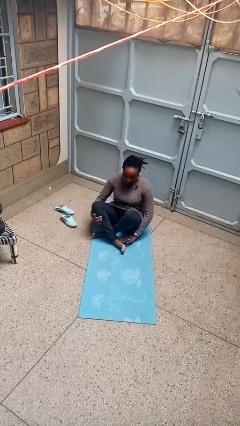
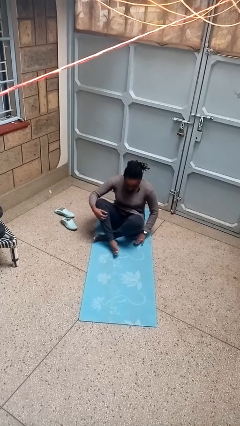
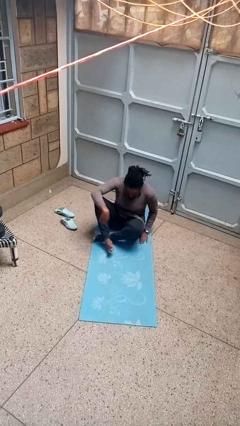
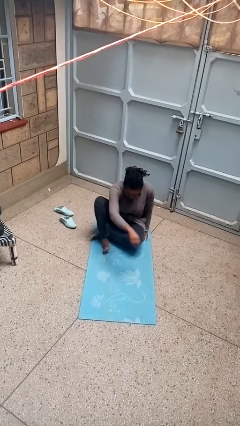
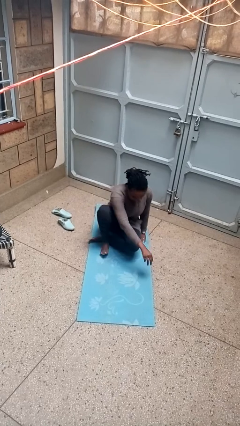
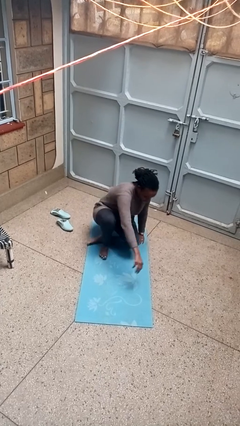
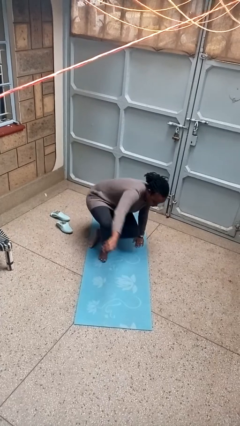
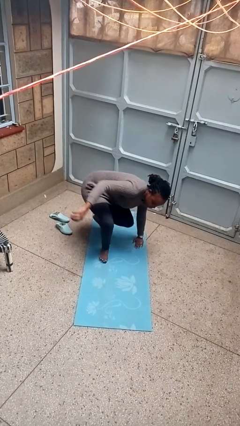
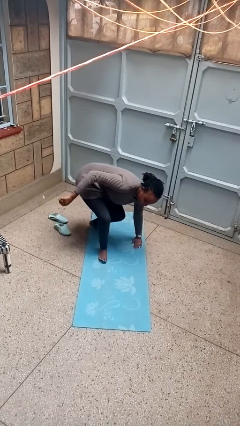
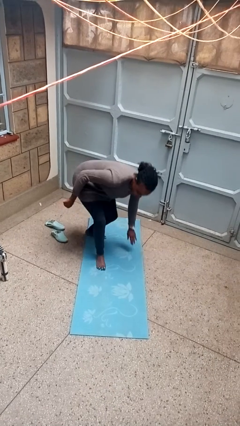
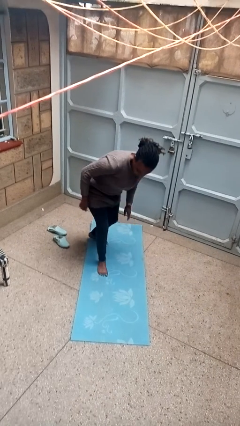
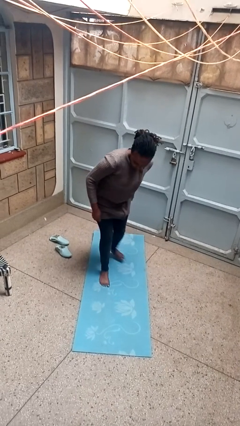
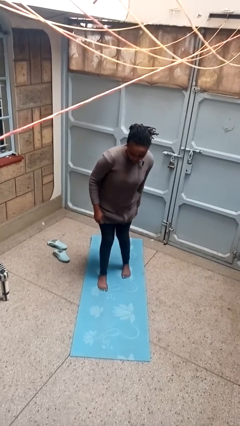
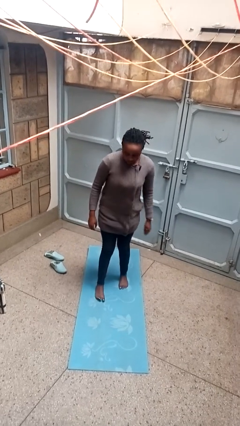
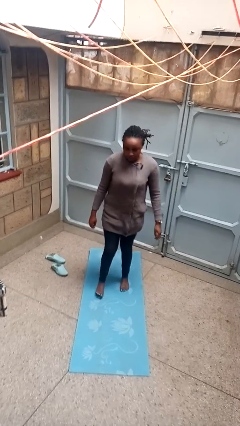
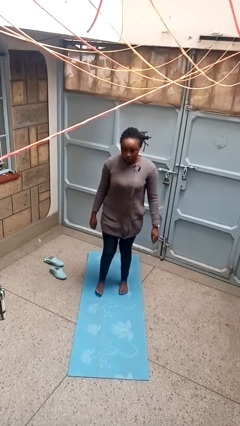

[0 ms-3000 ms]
person stands up from floor

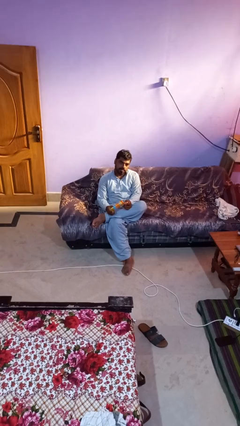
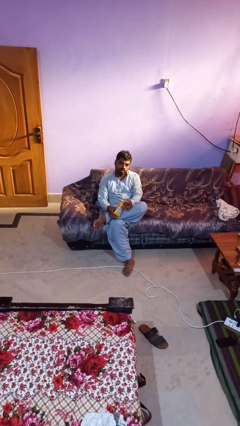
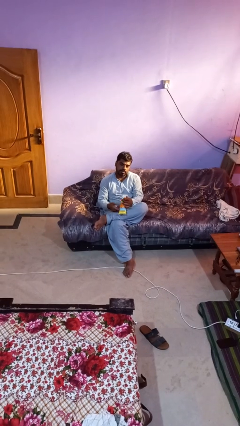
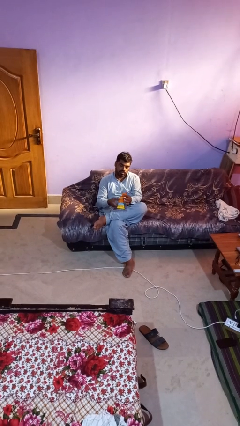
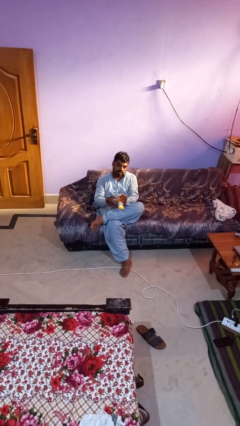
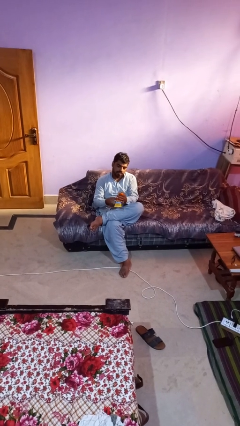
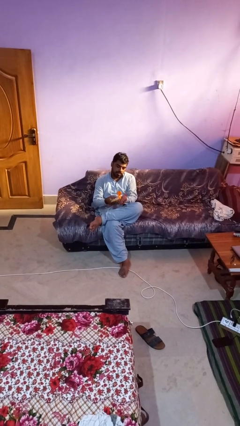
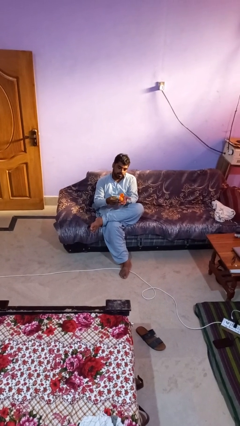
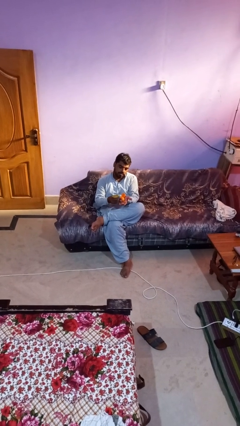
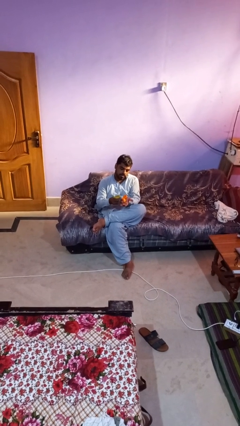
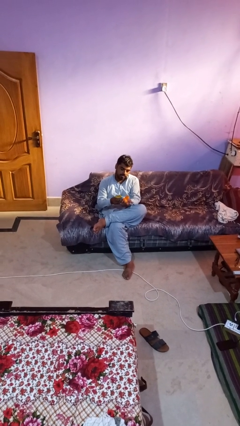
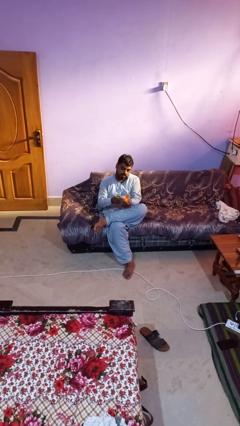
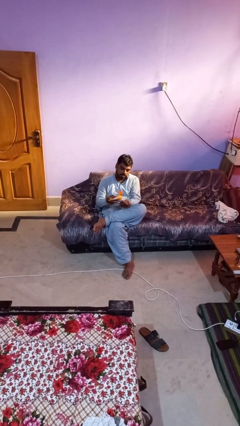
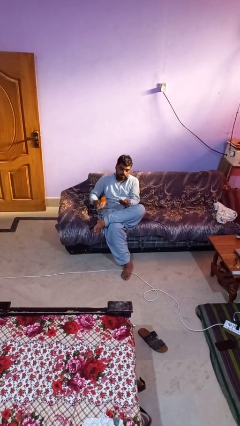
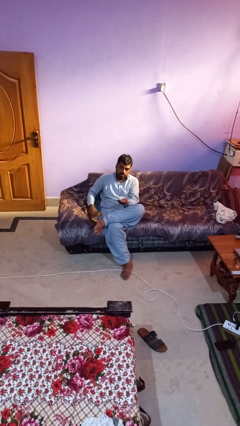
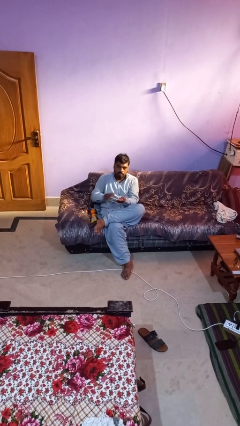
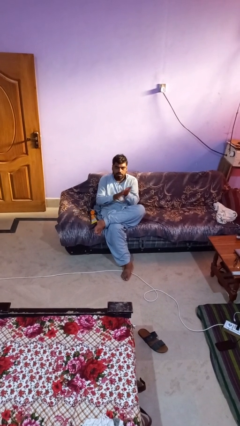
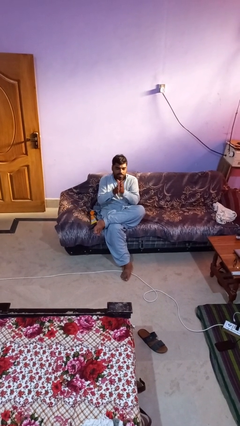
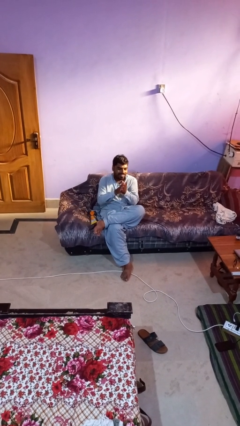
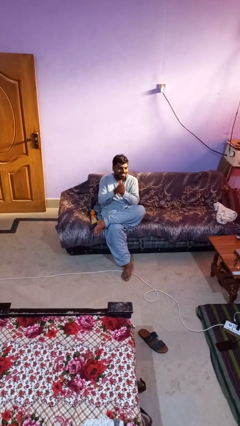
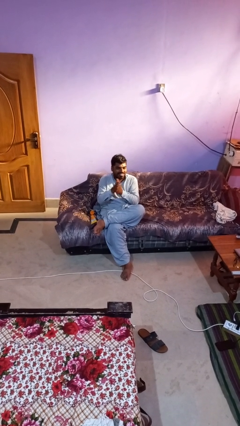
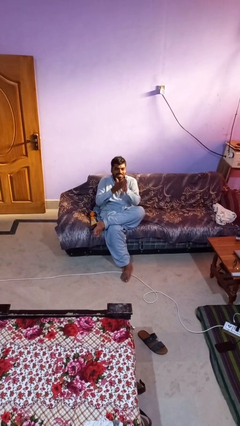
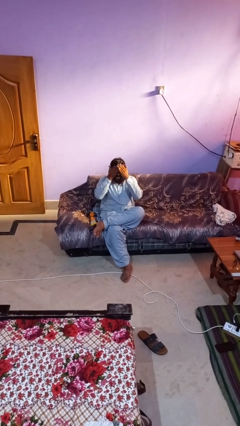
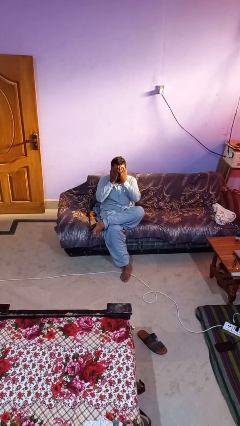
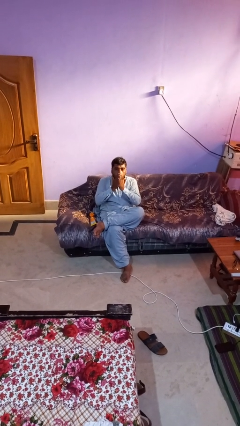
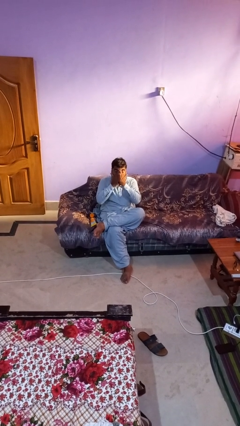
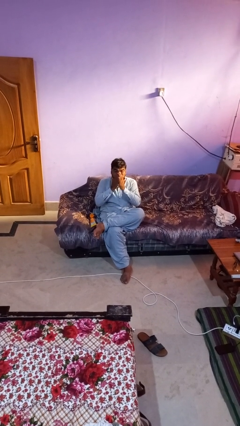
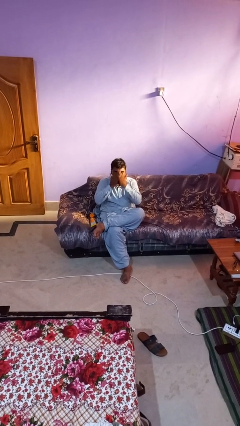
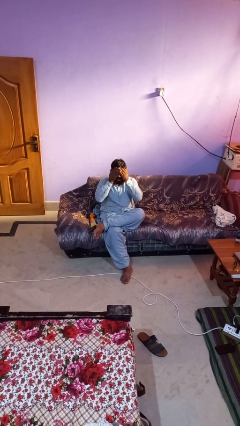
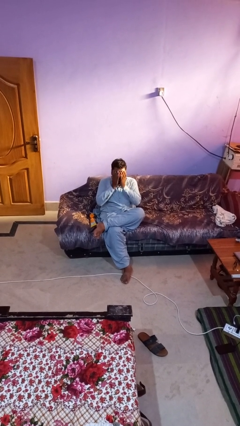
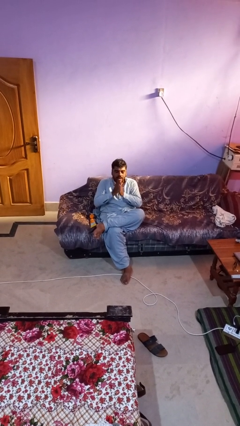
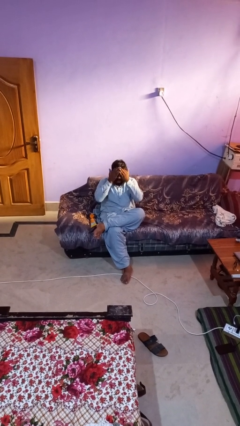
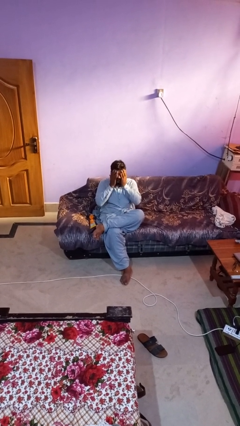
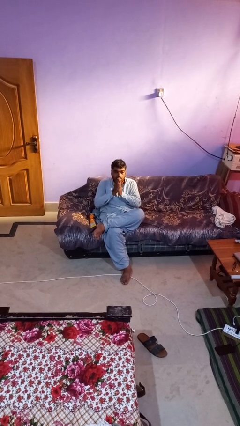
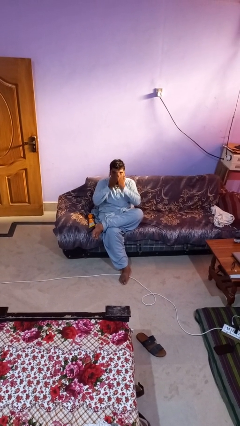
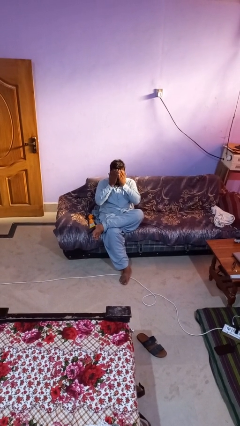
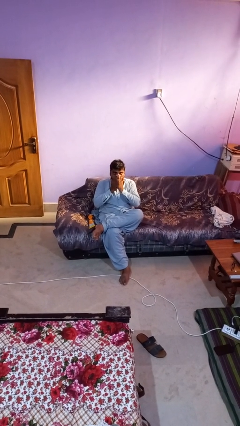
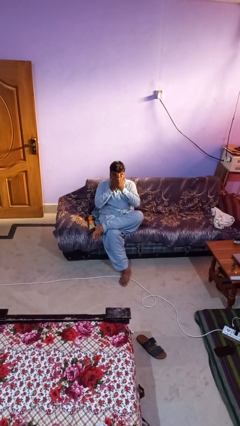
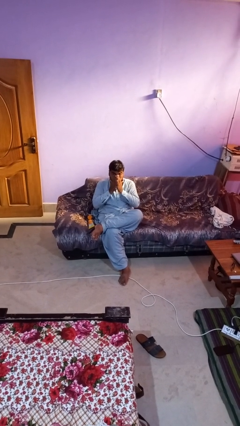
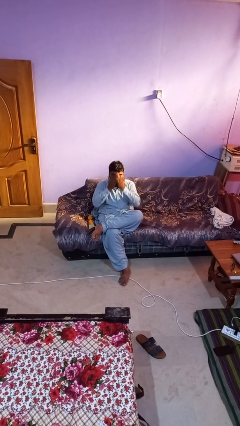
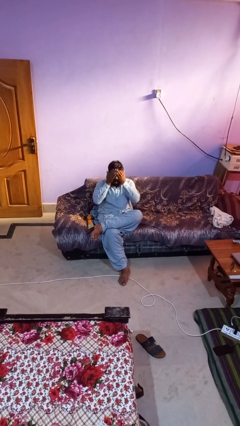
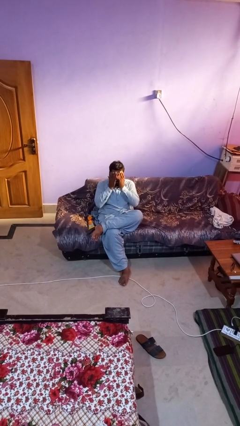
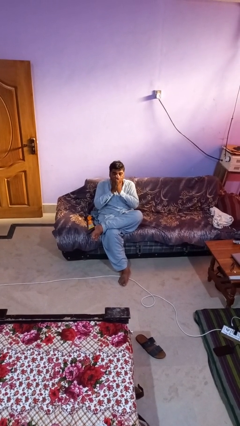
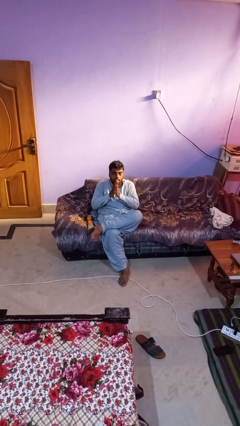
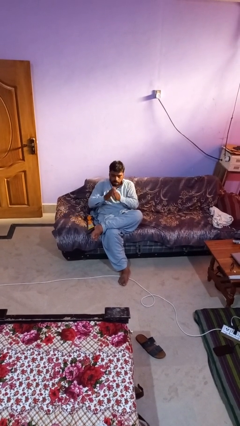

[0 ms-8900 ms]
person applies facial moisturizer

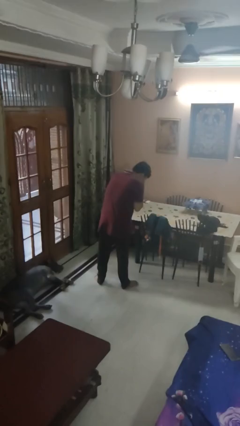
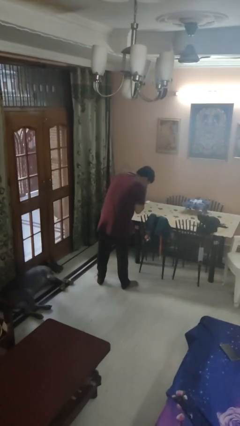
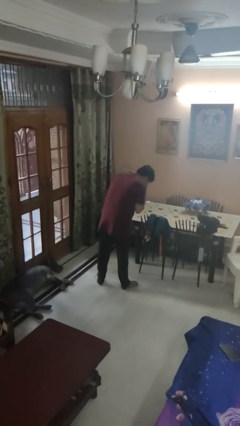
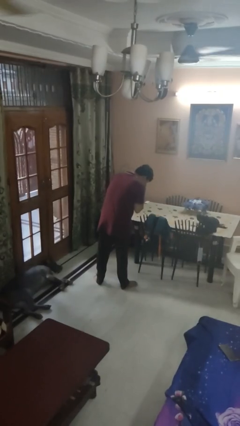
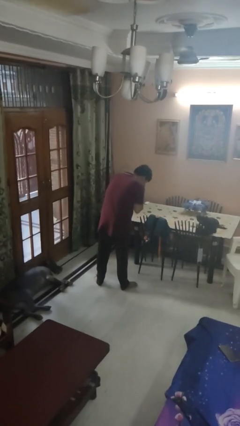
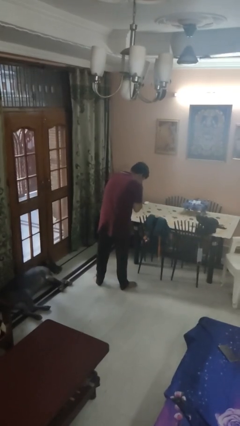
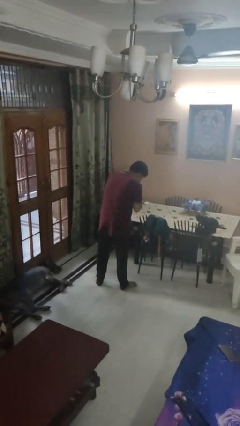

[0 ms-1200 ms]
person sneezes into hand

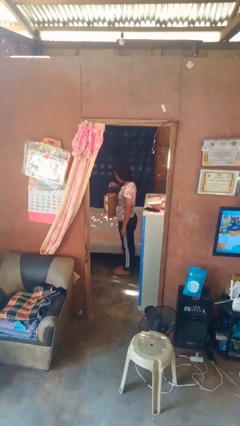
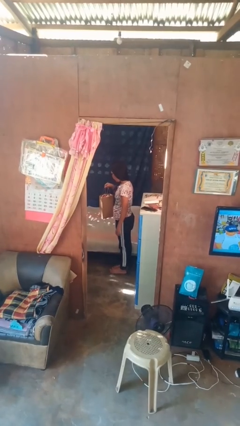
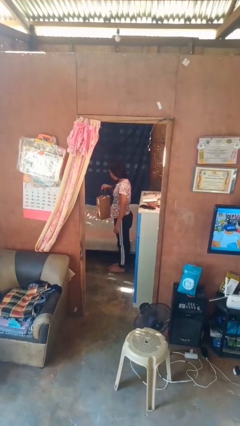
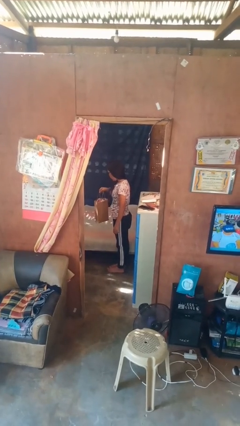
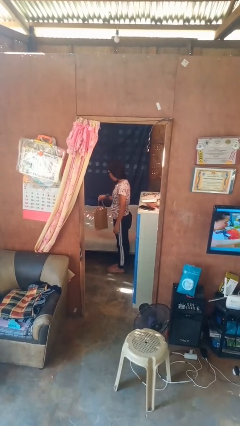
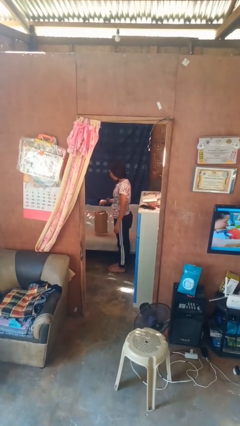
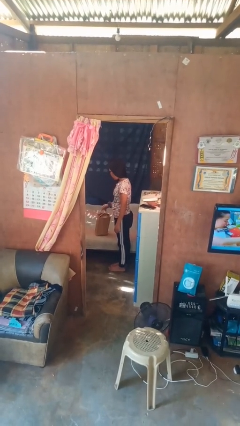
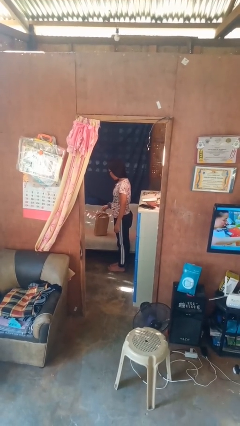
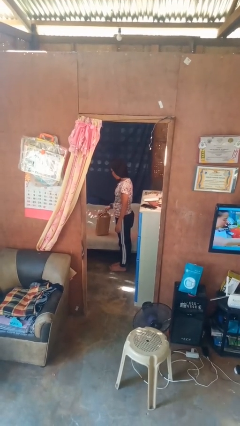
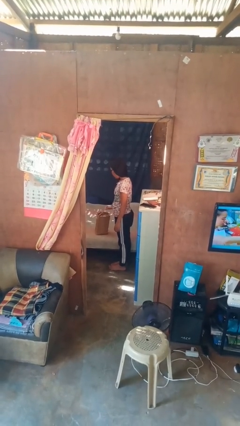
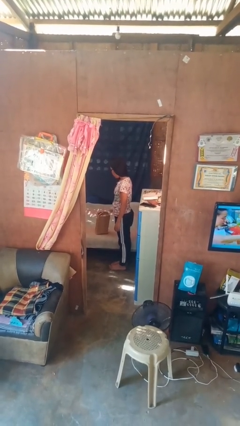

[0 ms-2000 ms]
person puts down object on bed

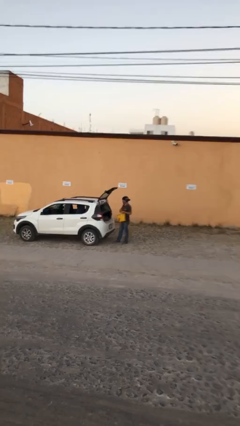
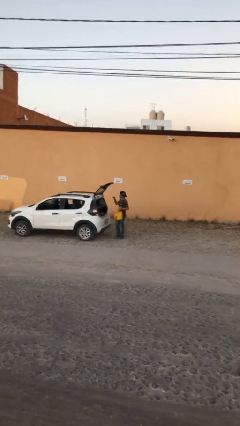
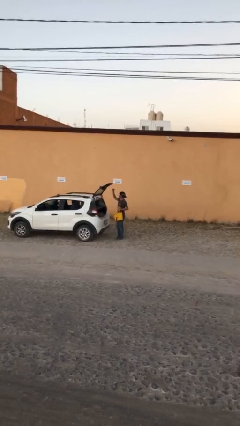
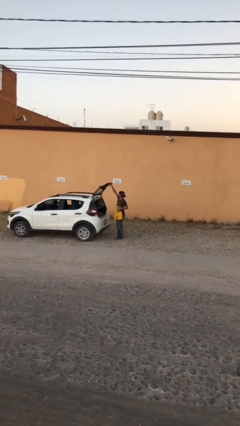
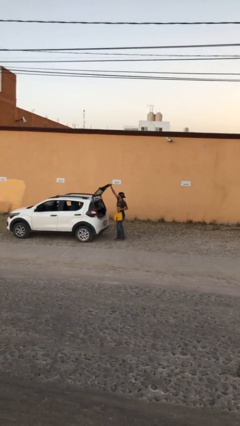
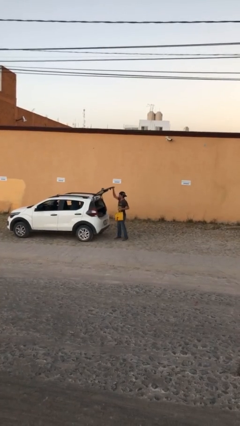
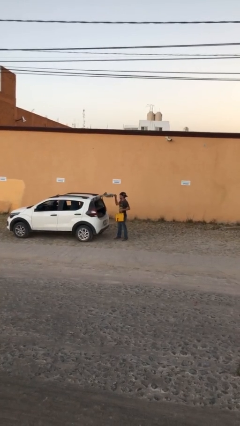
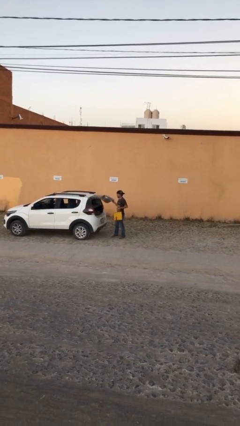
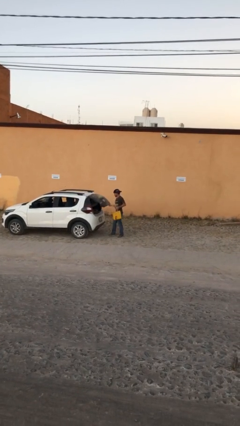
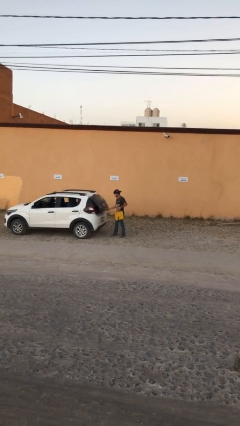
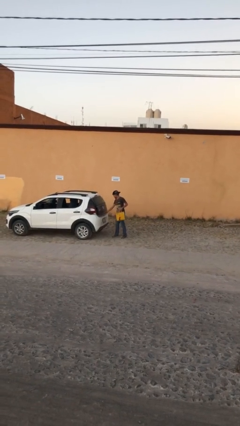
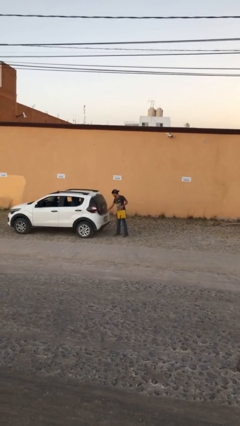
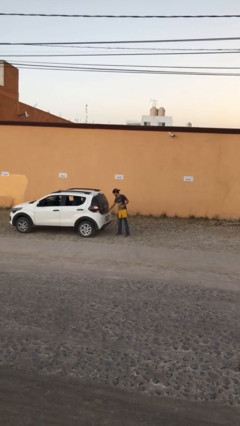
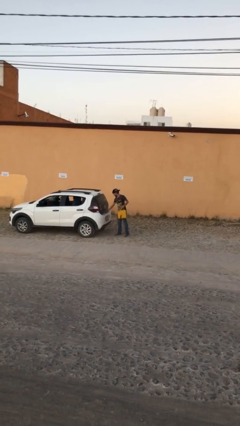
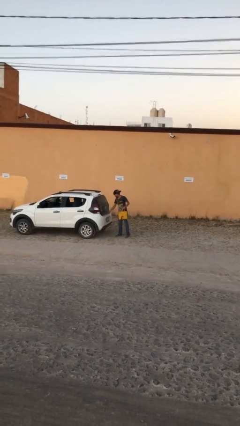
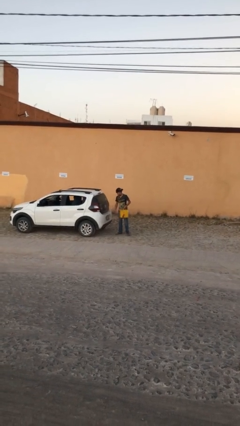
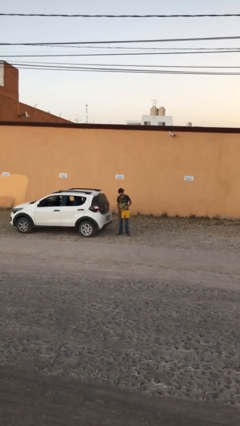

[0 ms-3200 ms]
person closes car trunk
